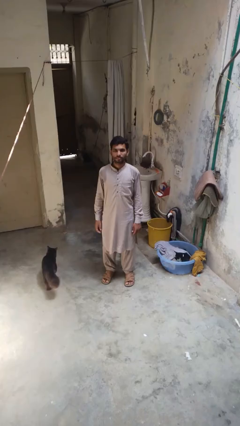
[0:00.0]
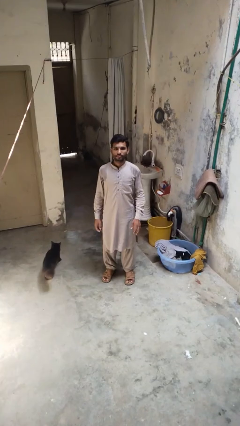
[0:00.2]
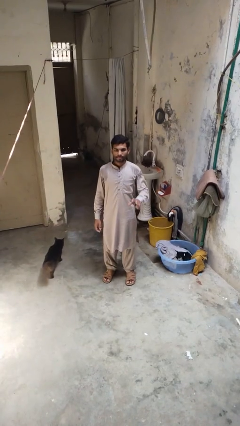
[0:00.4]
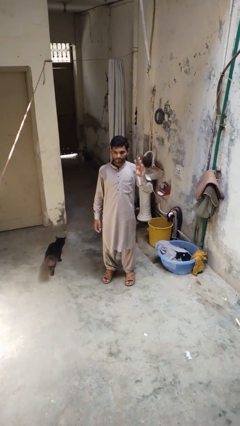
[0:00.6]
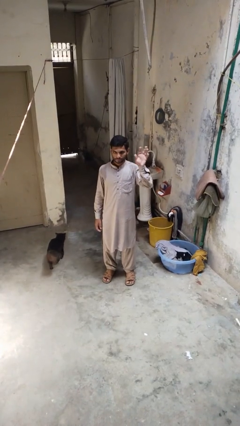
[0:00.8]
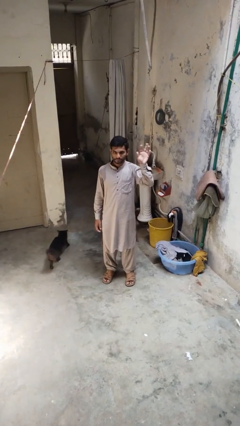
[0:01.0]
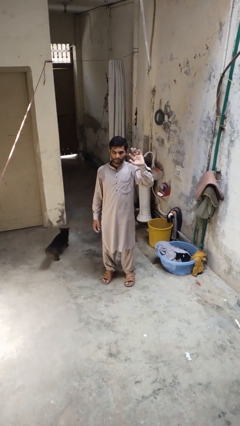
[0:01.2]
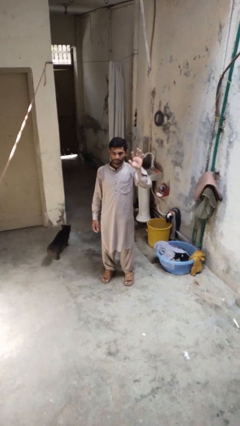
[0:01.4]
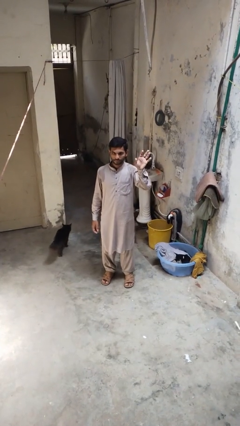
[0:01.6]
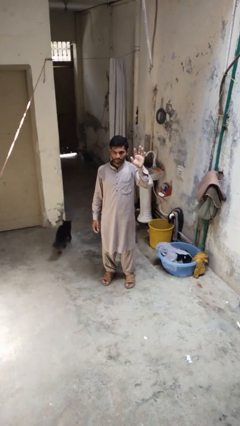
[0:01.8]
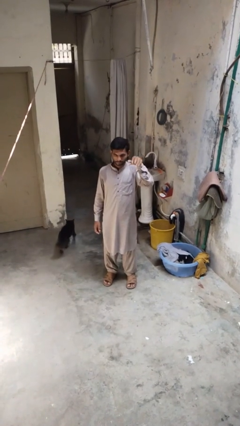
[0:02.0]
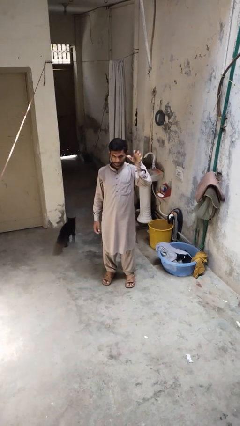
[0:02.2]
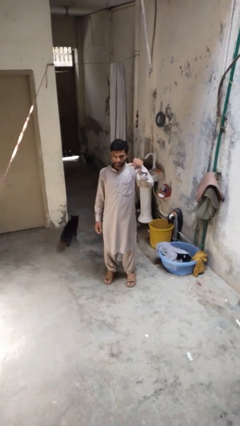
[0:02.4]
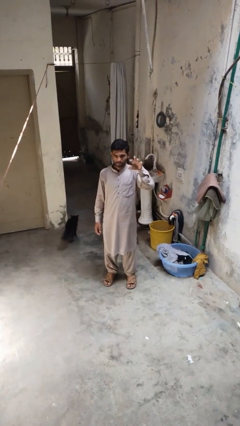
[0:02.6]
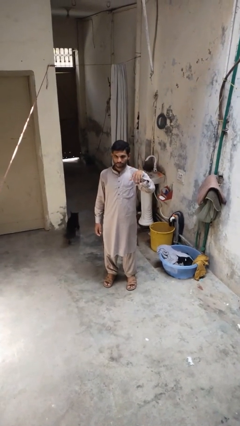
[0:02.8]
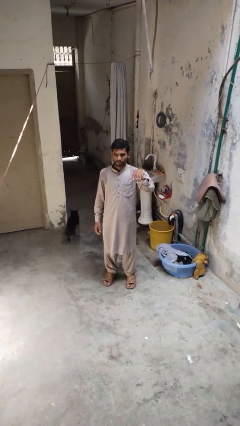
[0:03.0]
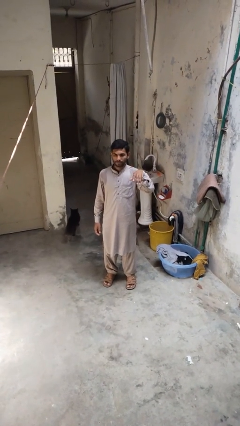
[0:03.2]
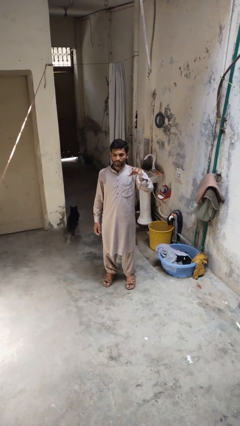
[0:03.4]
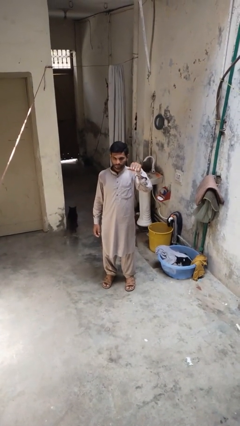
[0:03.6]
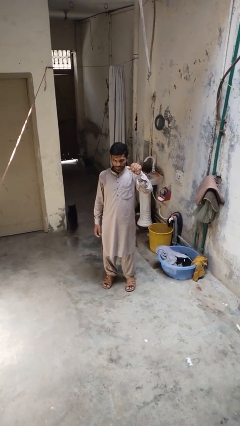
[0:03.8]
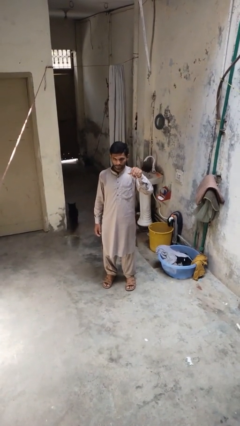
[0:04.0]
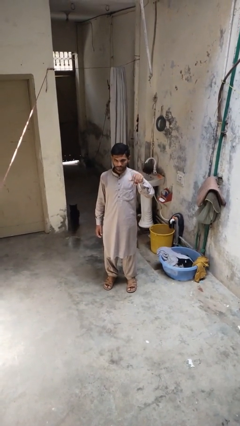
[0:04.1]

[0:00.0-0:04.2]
person gestures come here

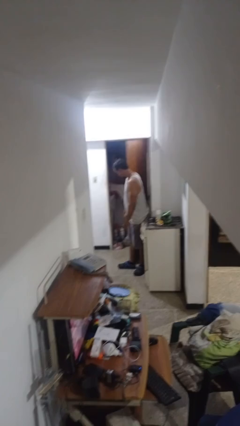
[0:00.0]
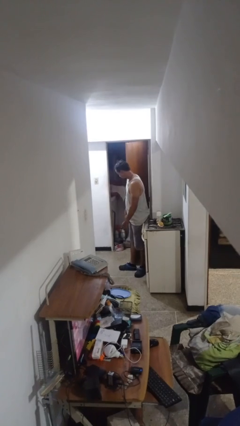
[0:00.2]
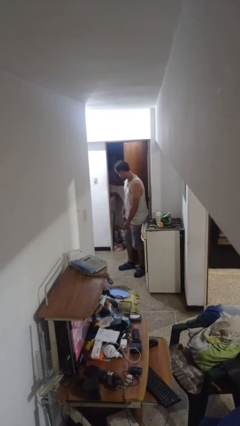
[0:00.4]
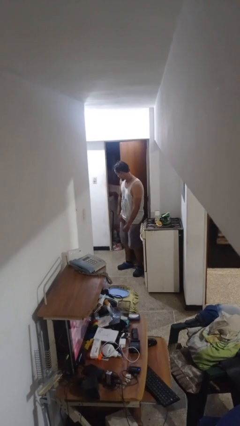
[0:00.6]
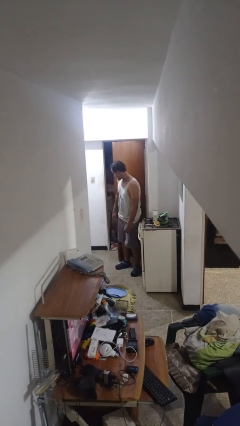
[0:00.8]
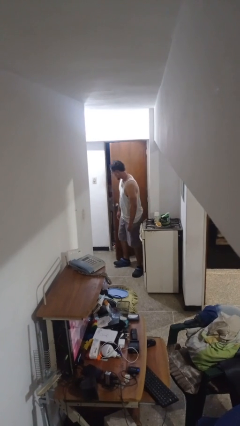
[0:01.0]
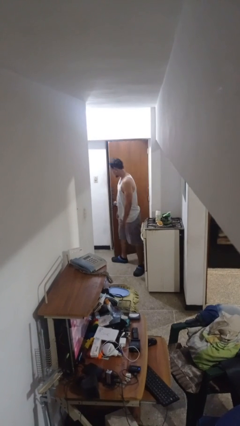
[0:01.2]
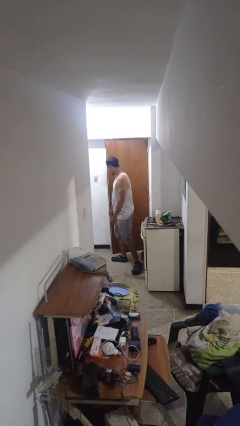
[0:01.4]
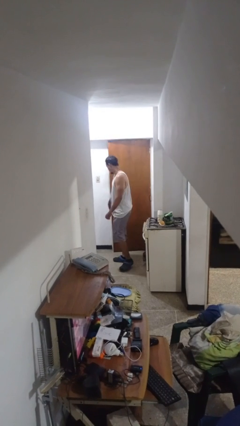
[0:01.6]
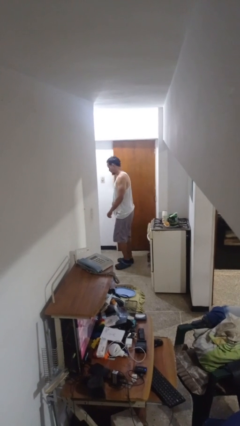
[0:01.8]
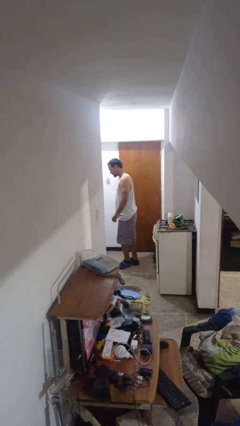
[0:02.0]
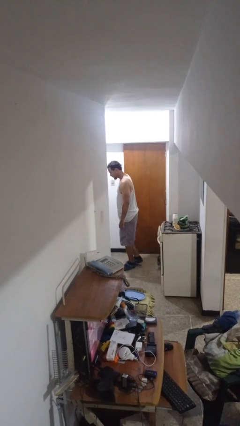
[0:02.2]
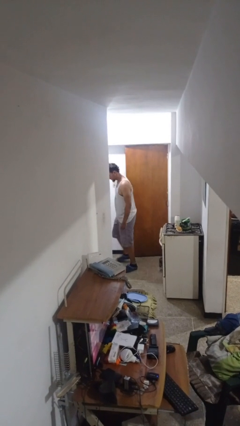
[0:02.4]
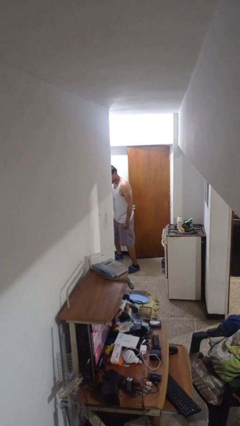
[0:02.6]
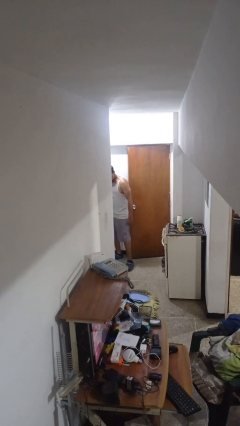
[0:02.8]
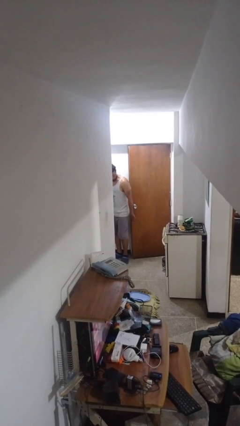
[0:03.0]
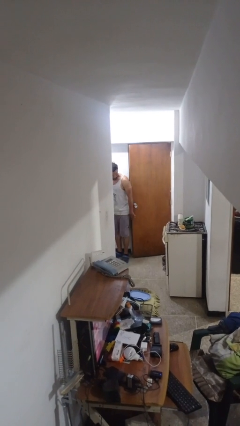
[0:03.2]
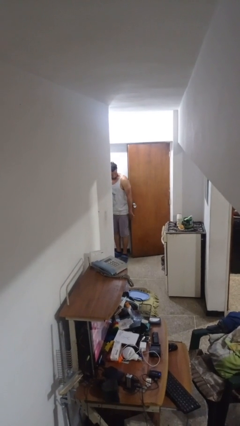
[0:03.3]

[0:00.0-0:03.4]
person closes door with hip

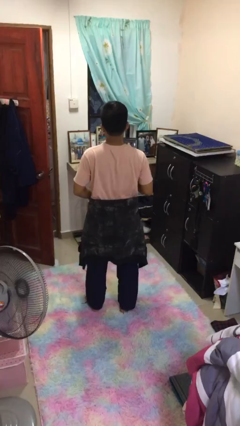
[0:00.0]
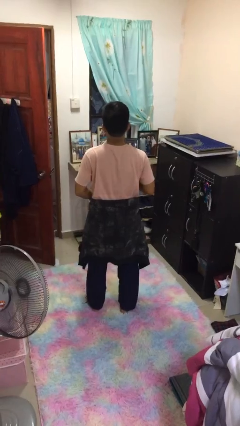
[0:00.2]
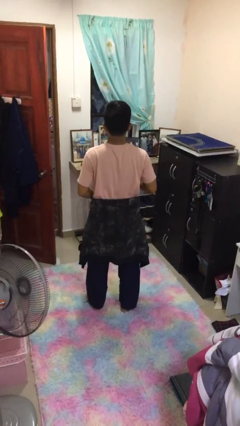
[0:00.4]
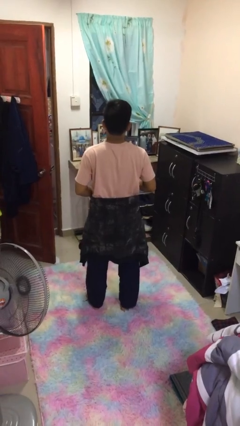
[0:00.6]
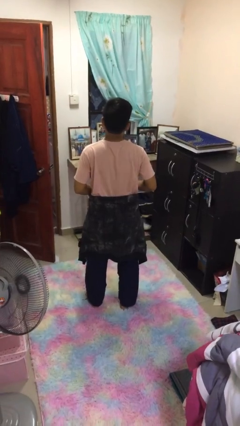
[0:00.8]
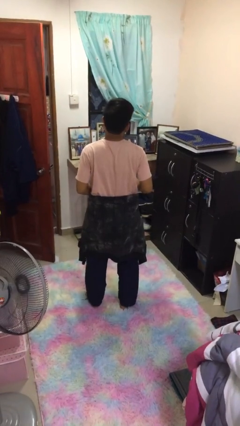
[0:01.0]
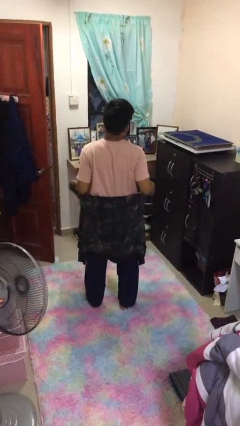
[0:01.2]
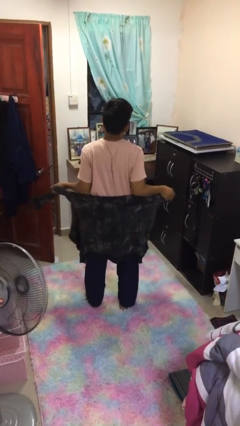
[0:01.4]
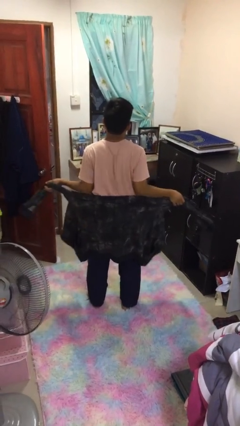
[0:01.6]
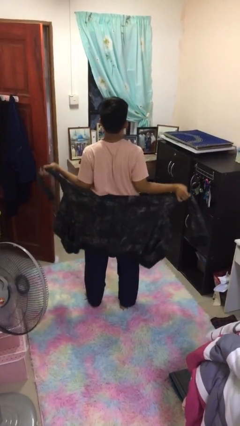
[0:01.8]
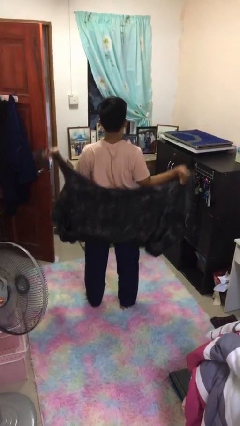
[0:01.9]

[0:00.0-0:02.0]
person unties jacket around waist

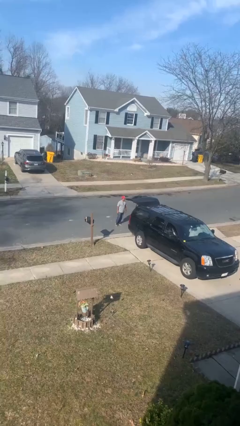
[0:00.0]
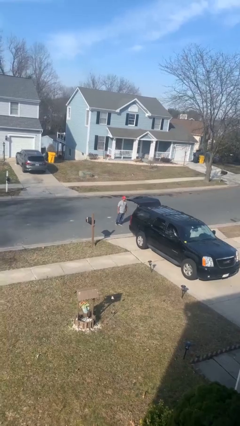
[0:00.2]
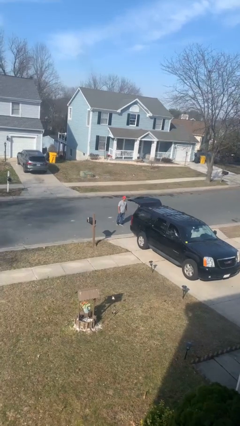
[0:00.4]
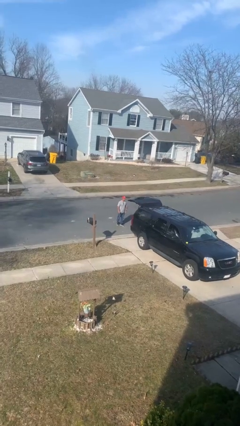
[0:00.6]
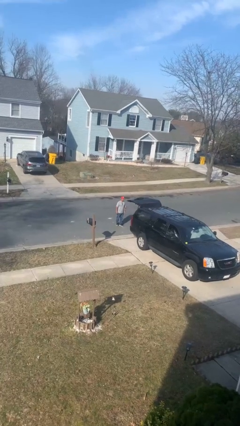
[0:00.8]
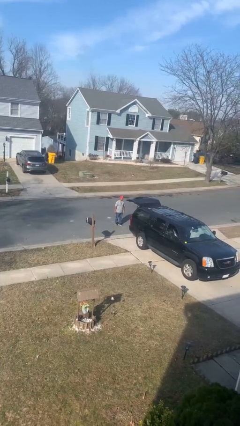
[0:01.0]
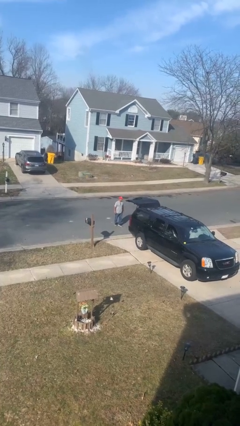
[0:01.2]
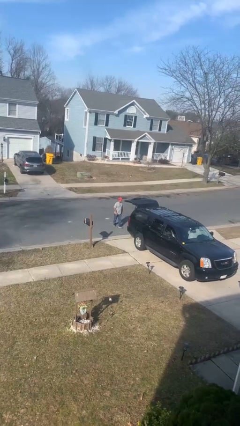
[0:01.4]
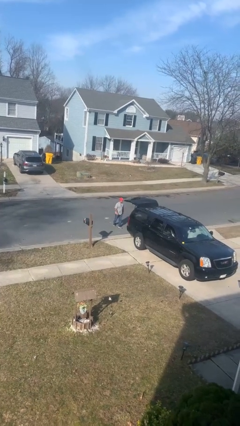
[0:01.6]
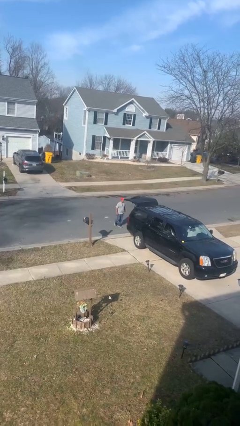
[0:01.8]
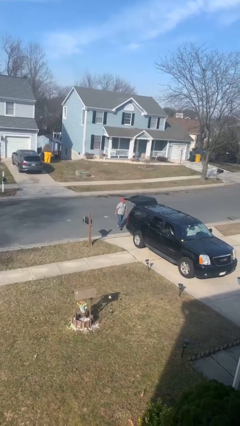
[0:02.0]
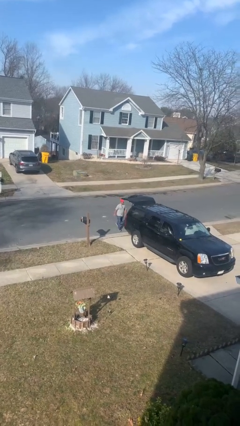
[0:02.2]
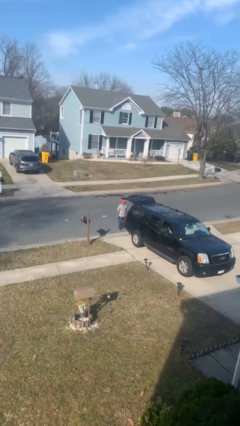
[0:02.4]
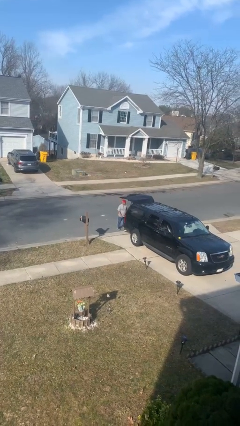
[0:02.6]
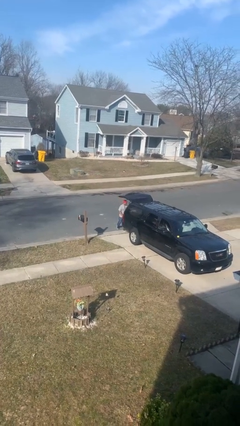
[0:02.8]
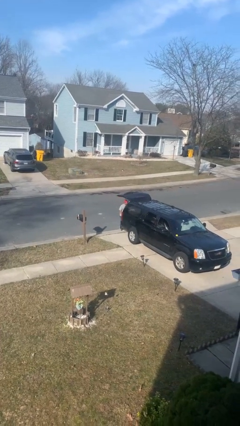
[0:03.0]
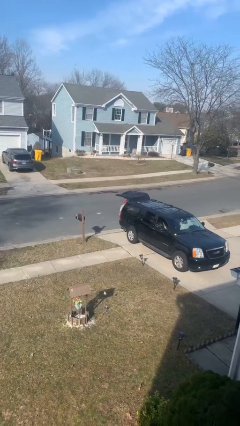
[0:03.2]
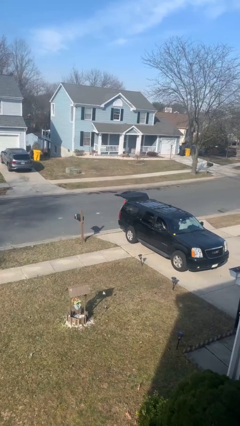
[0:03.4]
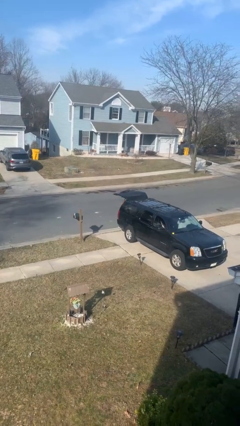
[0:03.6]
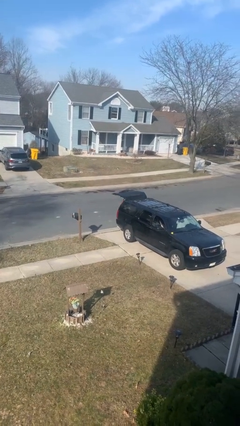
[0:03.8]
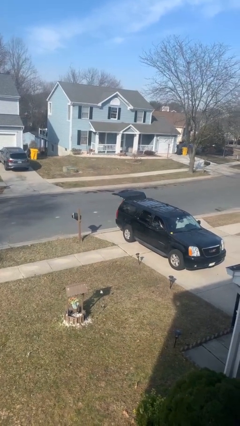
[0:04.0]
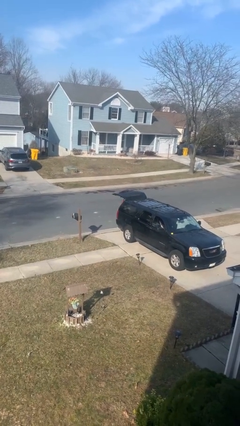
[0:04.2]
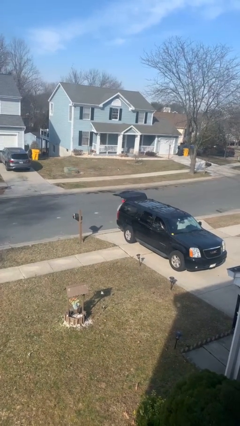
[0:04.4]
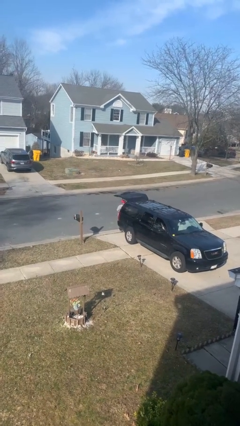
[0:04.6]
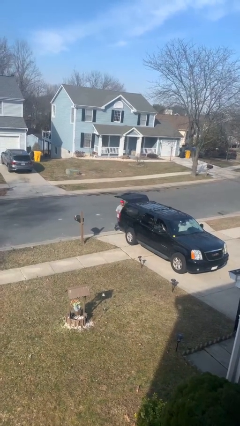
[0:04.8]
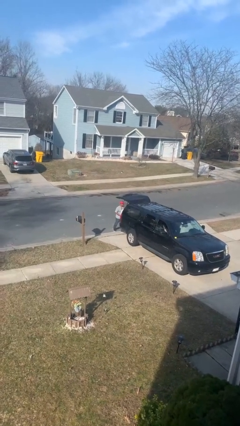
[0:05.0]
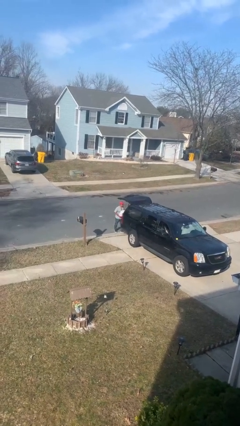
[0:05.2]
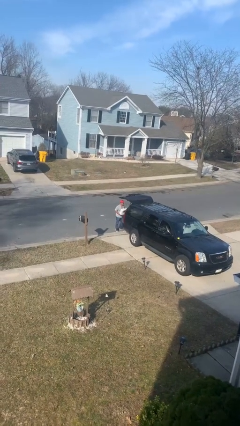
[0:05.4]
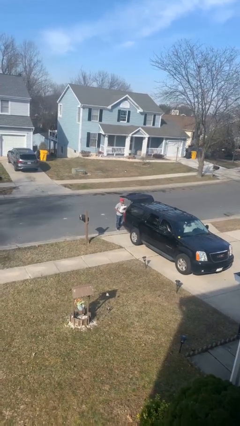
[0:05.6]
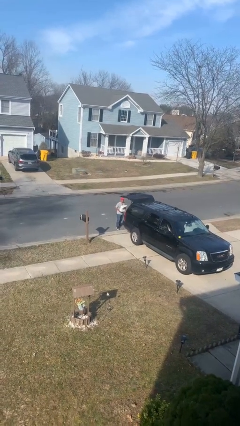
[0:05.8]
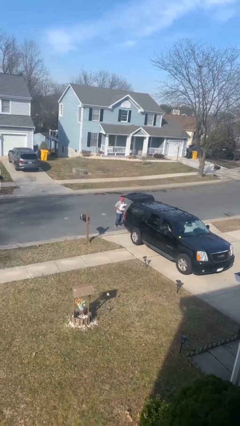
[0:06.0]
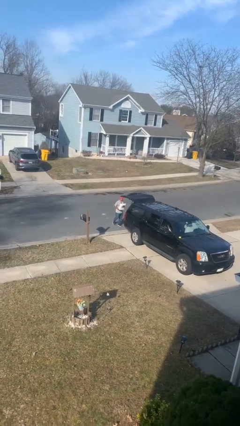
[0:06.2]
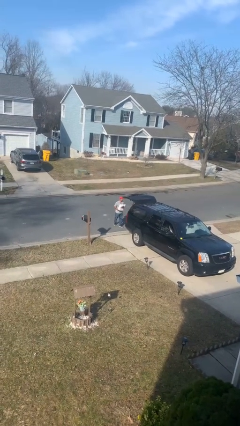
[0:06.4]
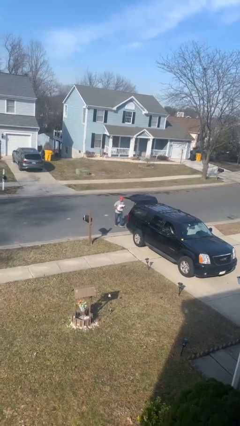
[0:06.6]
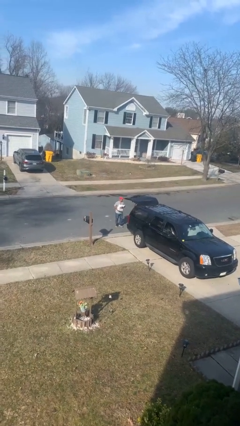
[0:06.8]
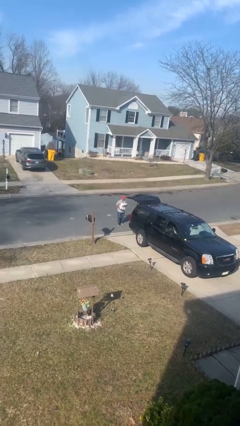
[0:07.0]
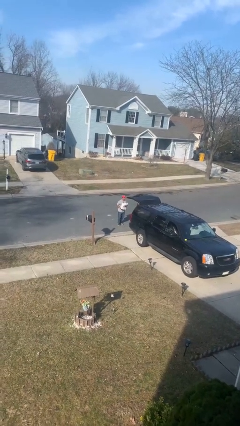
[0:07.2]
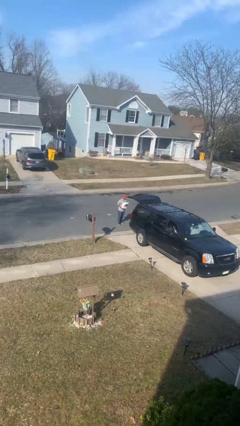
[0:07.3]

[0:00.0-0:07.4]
person unloads car

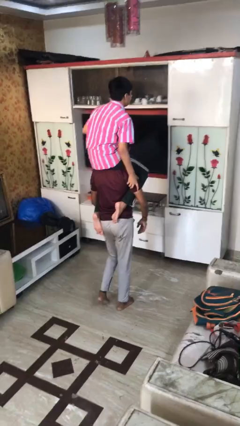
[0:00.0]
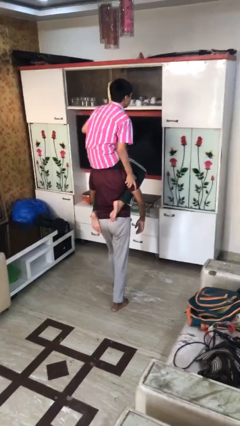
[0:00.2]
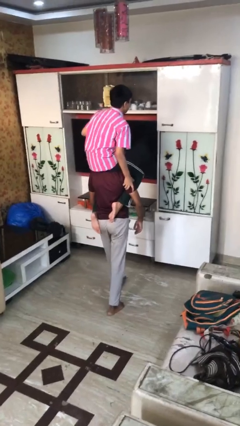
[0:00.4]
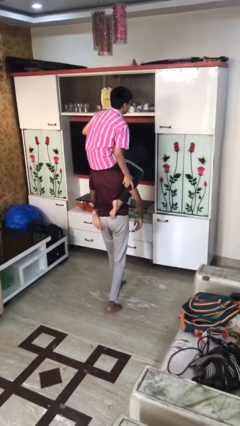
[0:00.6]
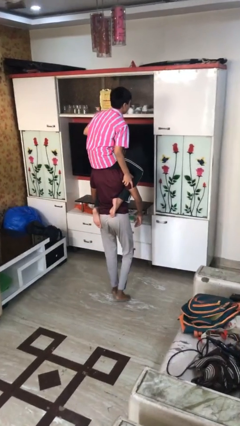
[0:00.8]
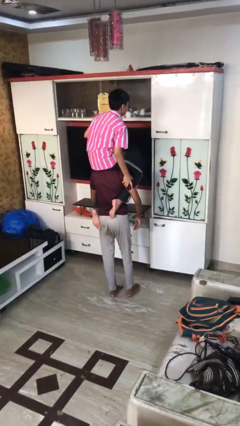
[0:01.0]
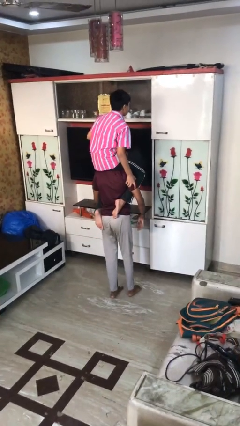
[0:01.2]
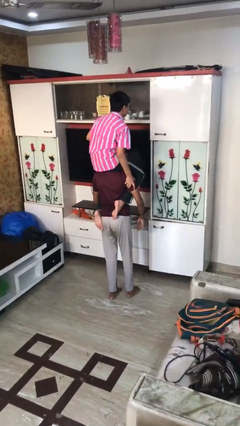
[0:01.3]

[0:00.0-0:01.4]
person carries person on shoulders
